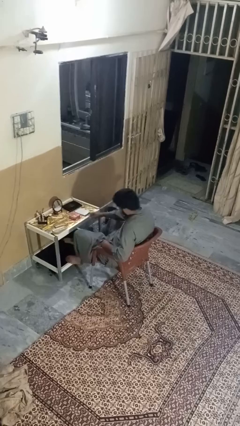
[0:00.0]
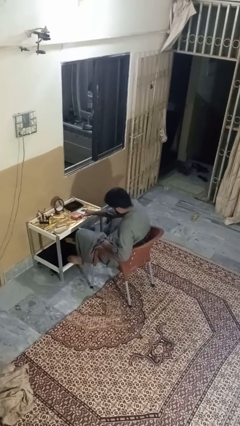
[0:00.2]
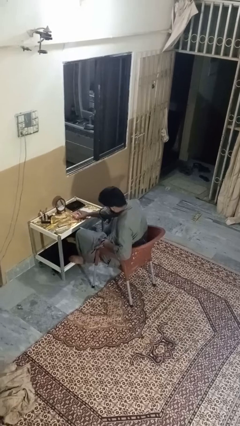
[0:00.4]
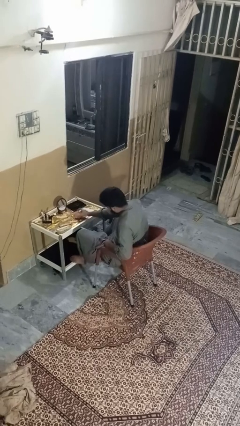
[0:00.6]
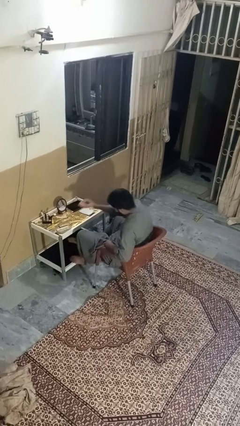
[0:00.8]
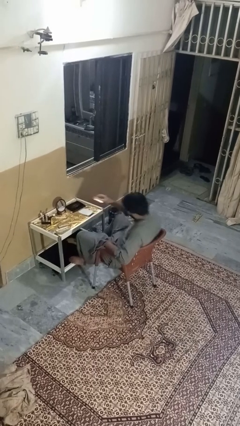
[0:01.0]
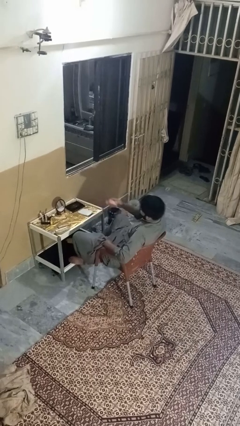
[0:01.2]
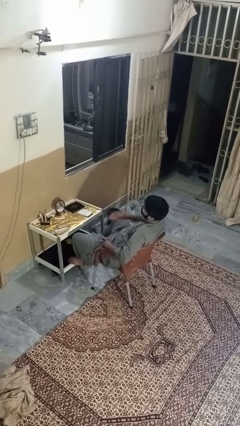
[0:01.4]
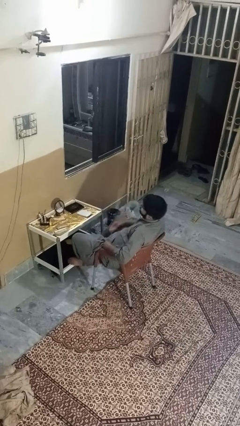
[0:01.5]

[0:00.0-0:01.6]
person picks up object from table

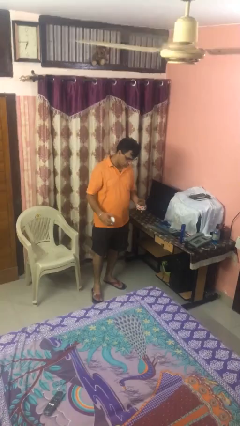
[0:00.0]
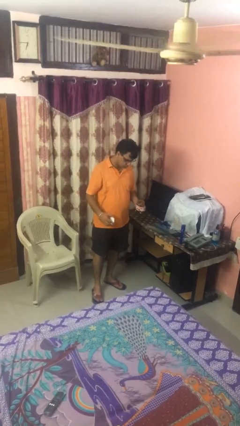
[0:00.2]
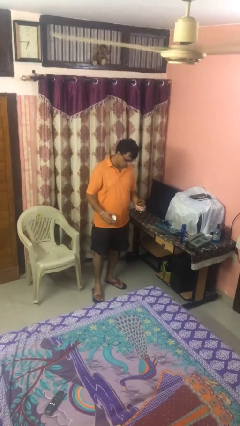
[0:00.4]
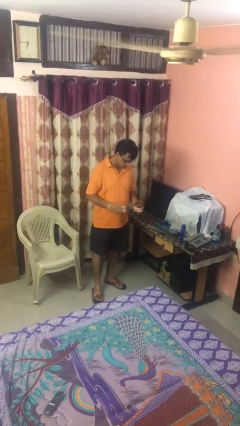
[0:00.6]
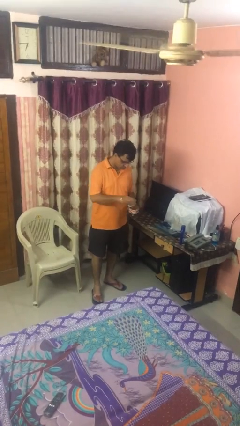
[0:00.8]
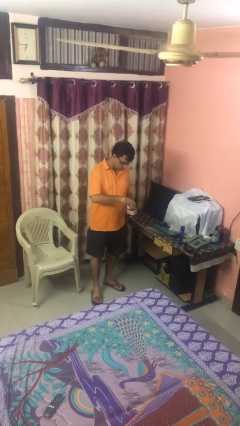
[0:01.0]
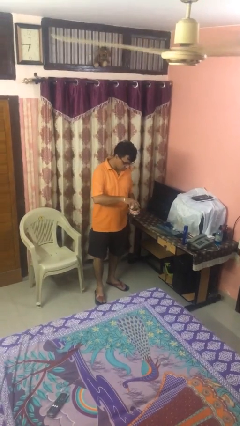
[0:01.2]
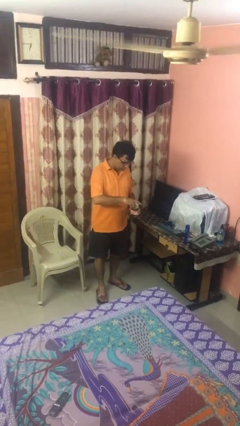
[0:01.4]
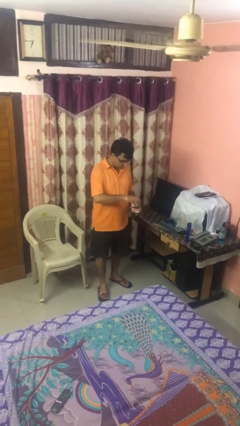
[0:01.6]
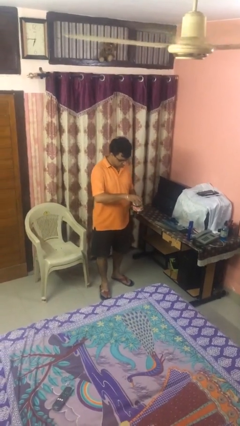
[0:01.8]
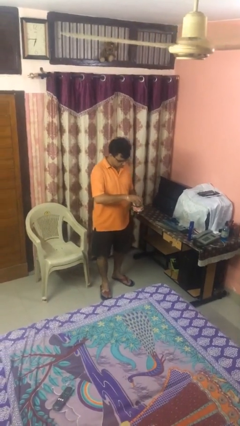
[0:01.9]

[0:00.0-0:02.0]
person closes jar

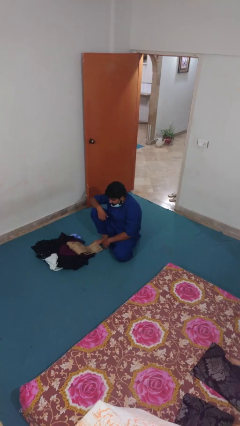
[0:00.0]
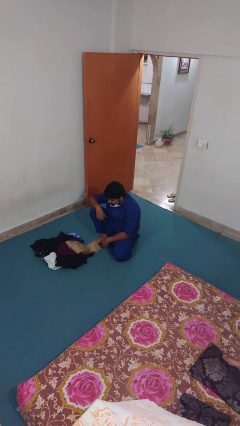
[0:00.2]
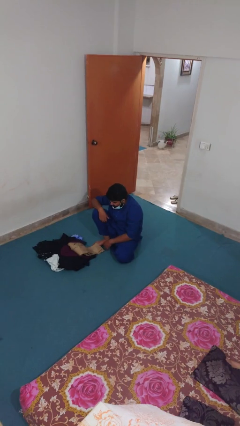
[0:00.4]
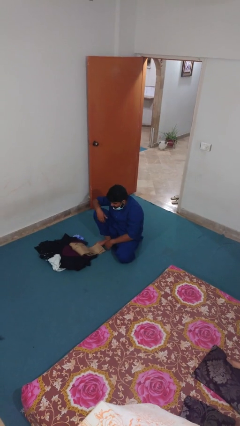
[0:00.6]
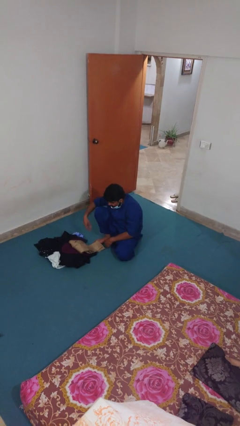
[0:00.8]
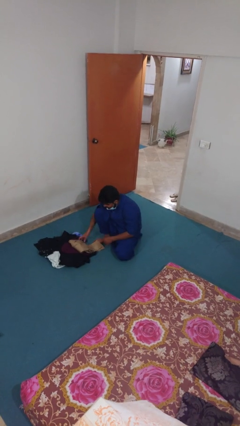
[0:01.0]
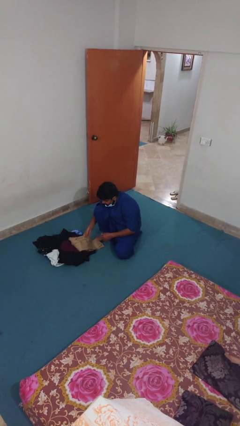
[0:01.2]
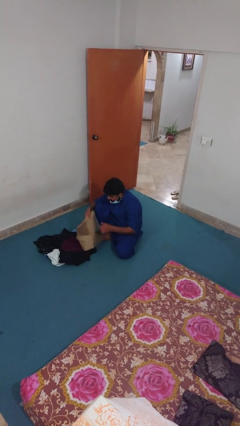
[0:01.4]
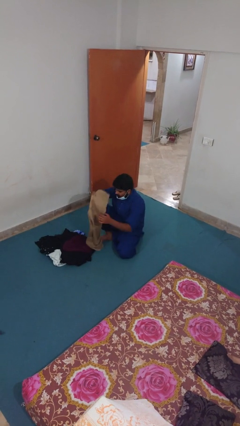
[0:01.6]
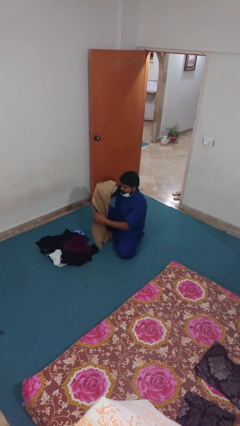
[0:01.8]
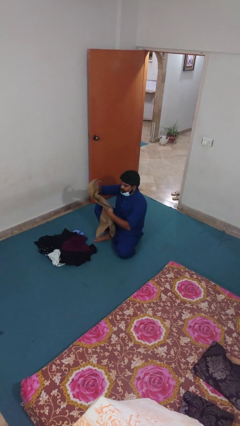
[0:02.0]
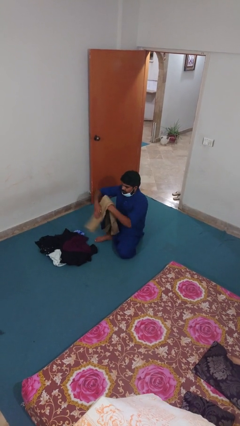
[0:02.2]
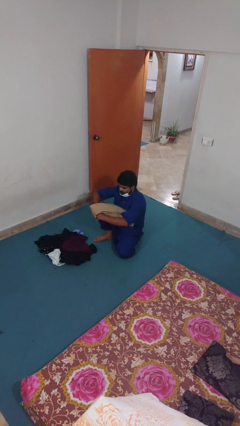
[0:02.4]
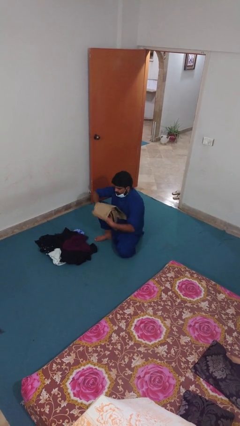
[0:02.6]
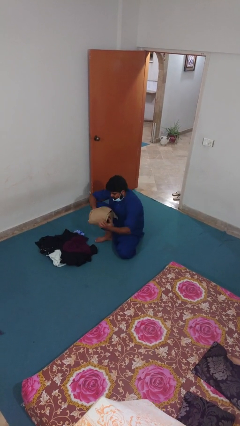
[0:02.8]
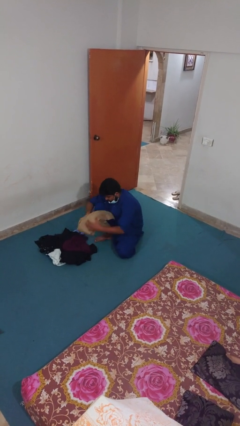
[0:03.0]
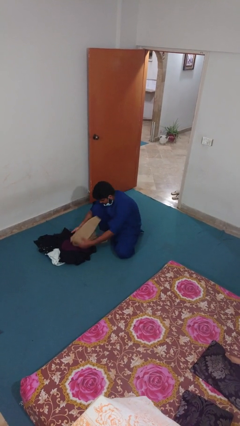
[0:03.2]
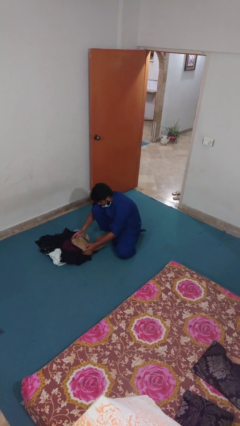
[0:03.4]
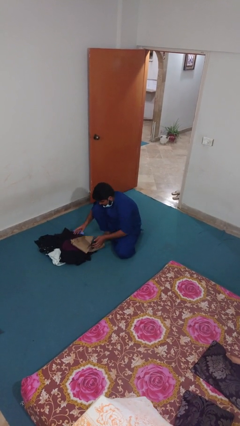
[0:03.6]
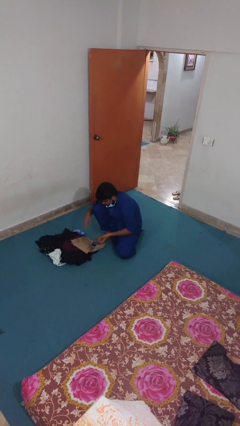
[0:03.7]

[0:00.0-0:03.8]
person folds pants

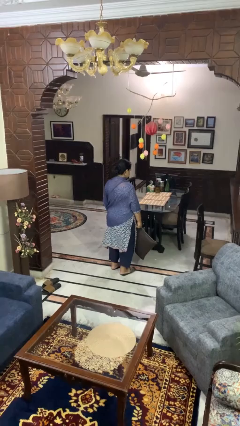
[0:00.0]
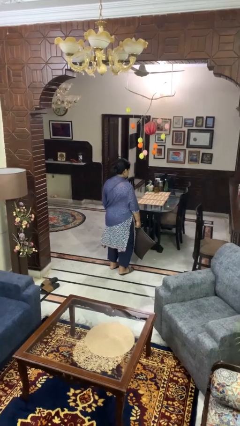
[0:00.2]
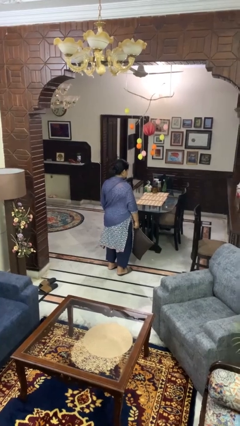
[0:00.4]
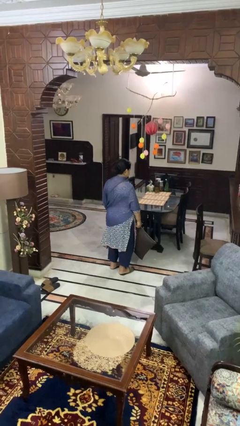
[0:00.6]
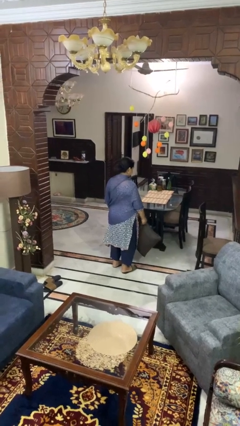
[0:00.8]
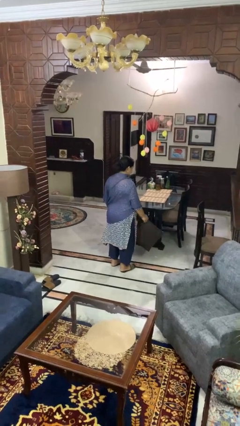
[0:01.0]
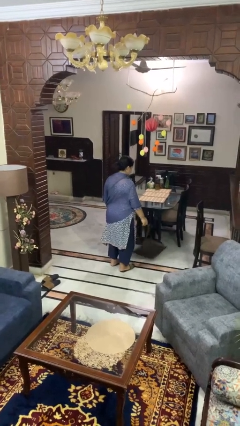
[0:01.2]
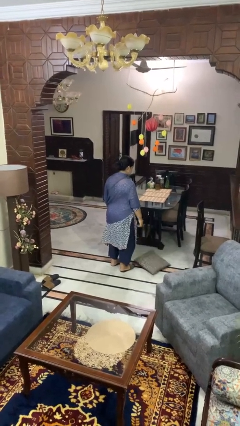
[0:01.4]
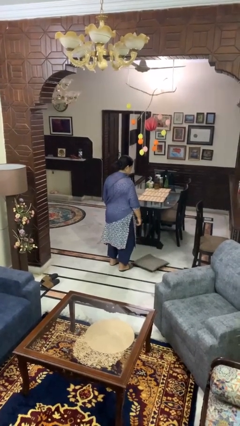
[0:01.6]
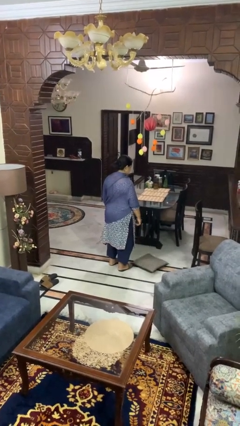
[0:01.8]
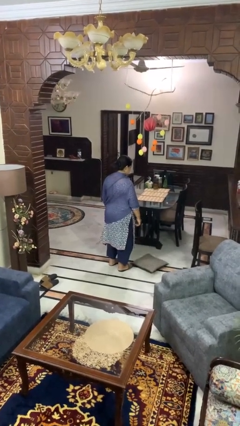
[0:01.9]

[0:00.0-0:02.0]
person throws object to ground

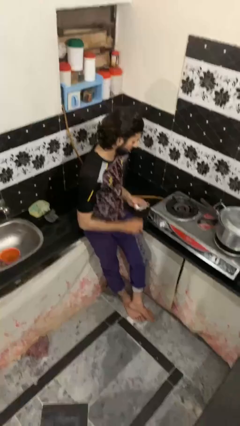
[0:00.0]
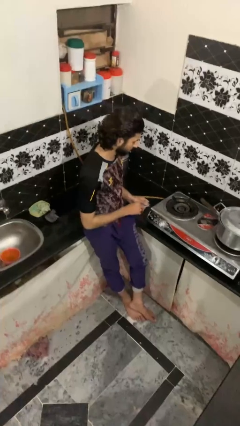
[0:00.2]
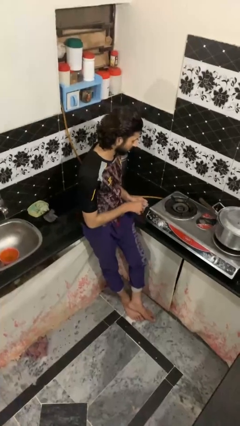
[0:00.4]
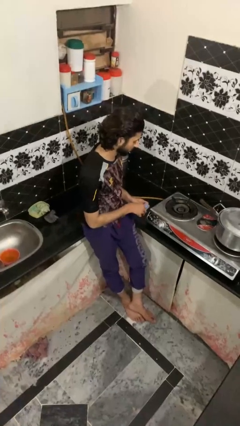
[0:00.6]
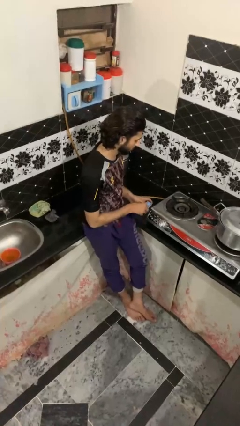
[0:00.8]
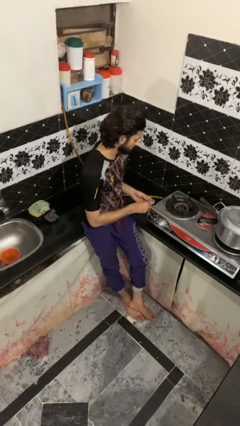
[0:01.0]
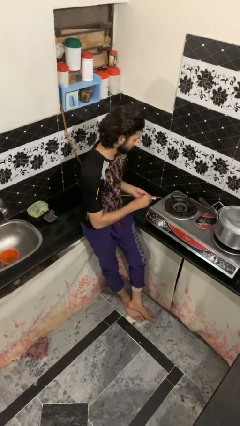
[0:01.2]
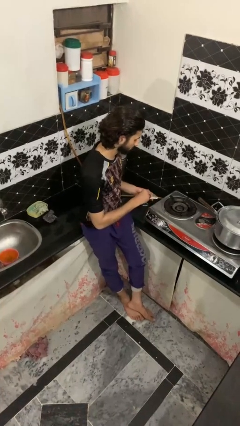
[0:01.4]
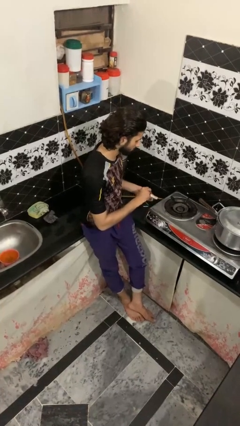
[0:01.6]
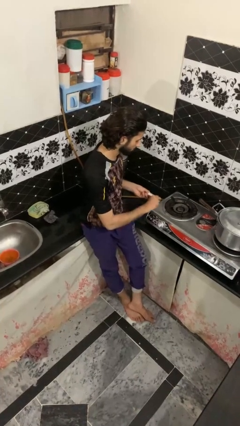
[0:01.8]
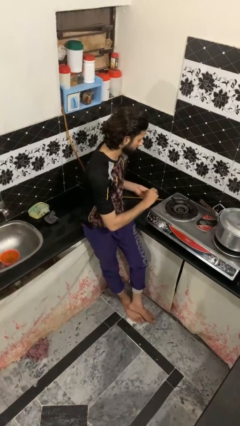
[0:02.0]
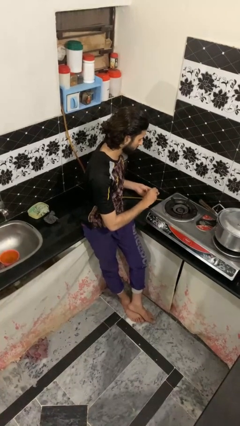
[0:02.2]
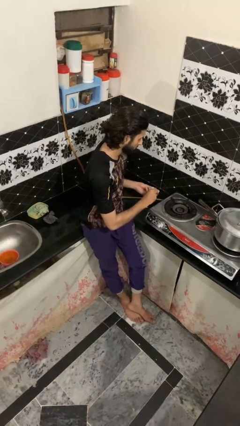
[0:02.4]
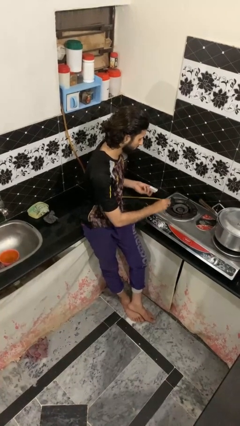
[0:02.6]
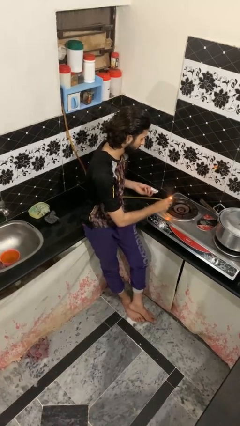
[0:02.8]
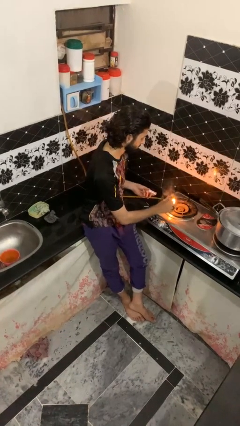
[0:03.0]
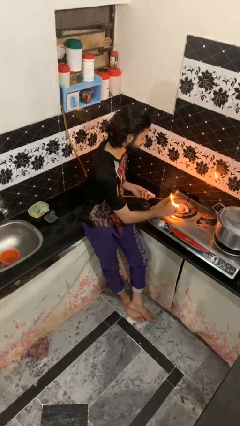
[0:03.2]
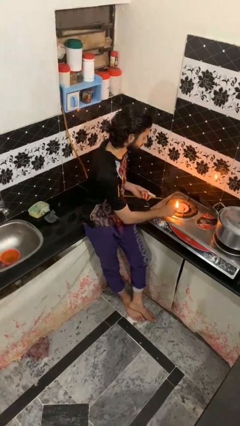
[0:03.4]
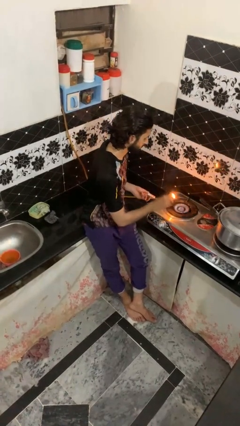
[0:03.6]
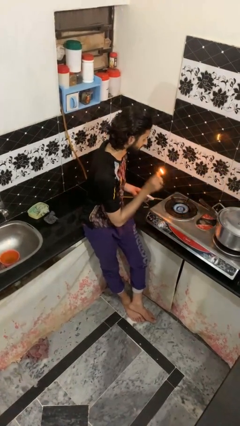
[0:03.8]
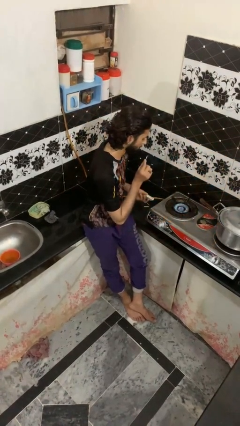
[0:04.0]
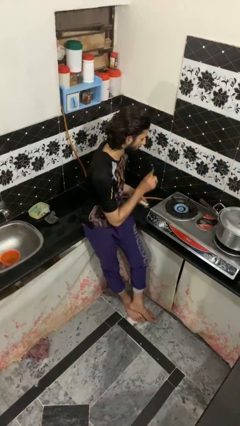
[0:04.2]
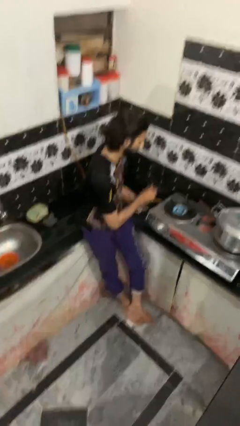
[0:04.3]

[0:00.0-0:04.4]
person turns on stovetop

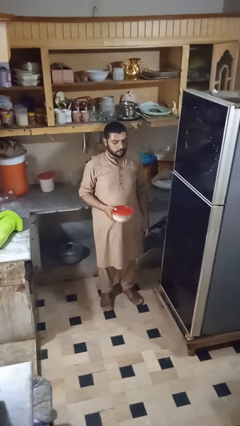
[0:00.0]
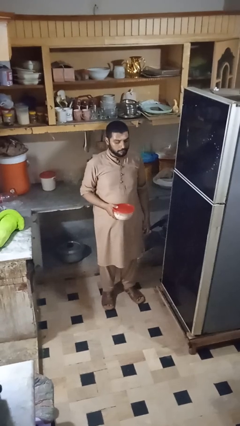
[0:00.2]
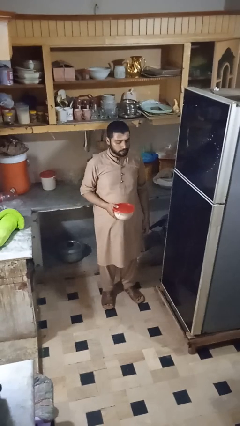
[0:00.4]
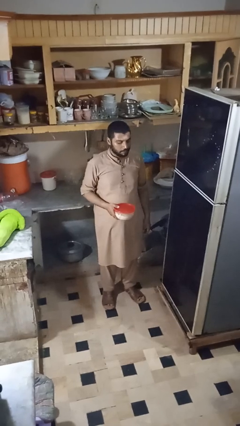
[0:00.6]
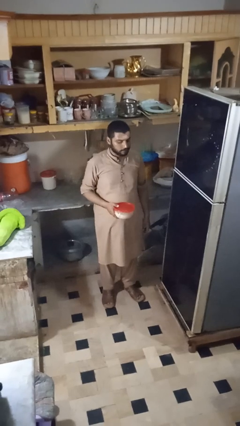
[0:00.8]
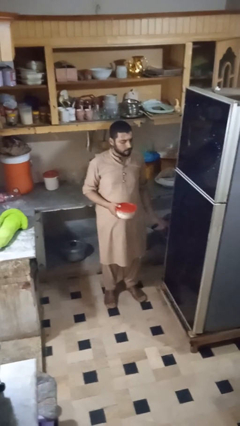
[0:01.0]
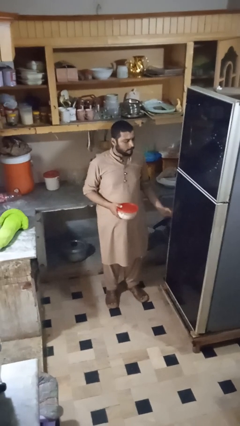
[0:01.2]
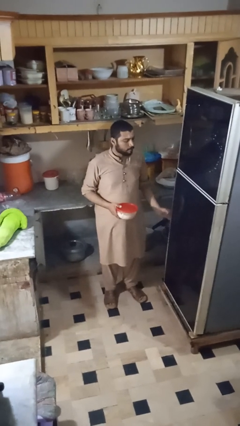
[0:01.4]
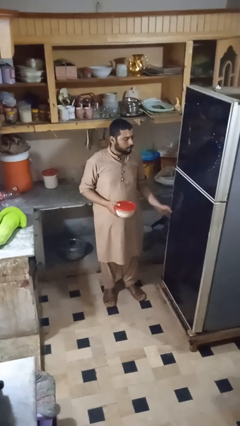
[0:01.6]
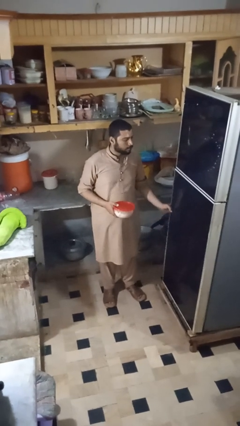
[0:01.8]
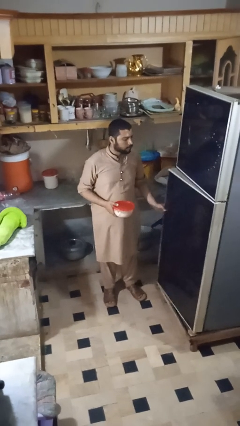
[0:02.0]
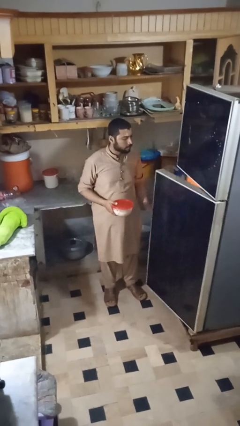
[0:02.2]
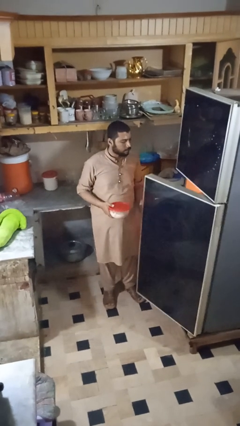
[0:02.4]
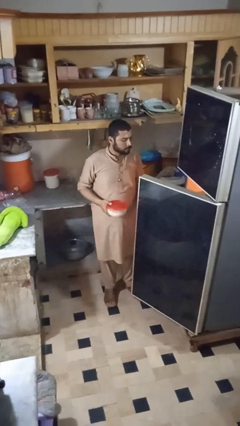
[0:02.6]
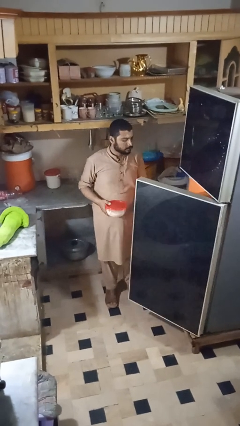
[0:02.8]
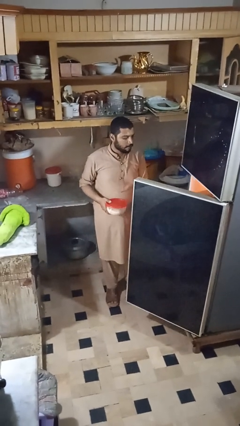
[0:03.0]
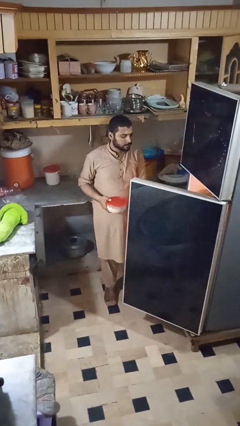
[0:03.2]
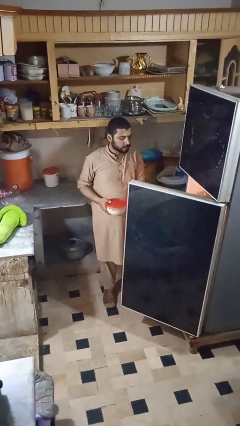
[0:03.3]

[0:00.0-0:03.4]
person opens refrigerator

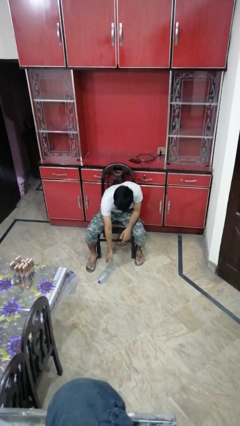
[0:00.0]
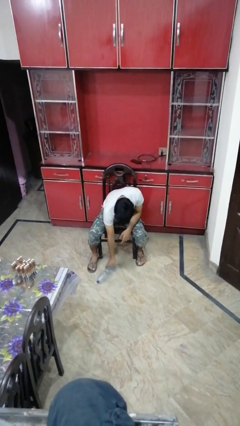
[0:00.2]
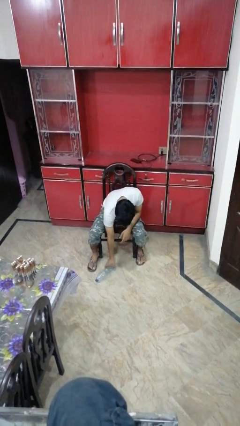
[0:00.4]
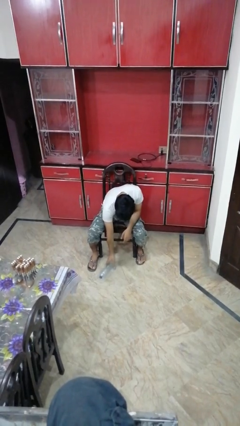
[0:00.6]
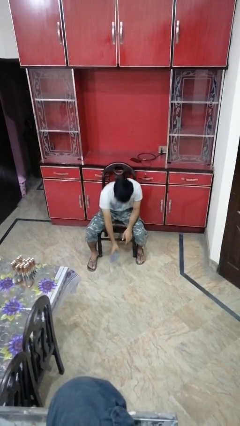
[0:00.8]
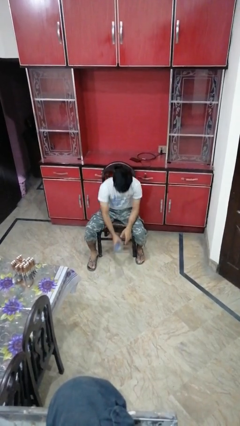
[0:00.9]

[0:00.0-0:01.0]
person picks up object from floor
